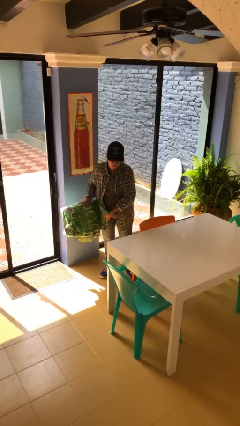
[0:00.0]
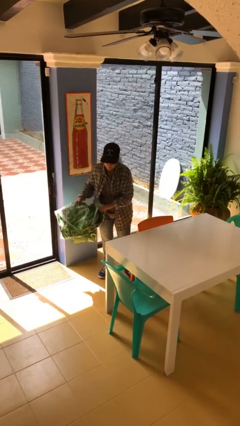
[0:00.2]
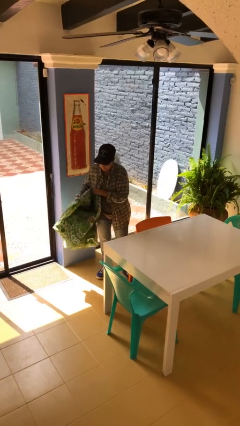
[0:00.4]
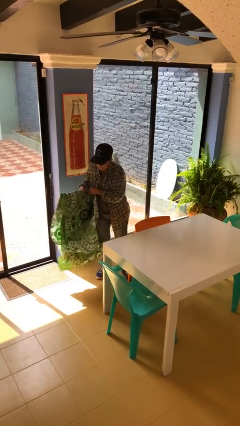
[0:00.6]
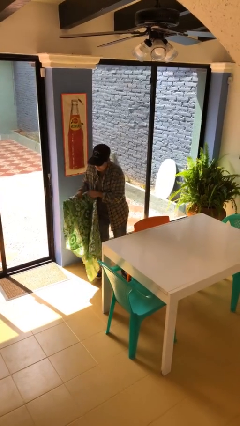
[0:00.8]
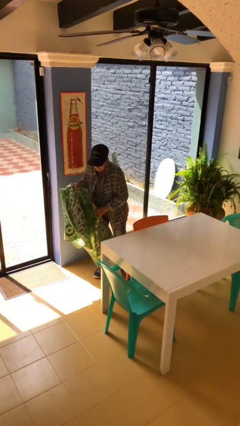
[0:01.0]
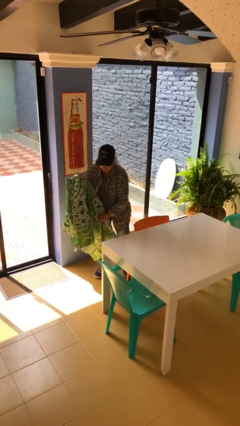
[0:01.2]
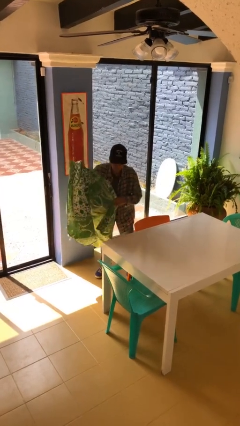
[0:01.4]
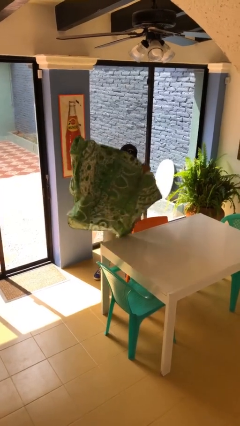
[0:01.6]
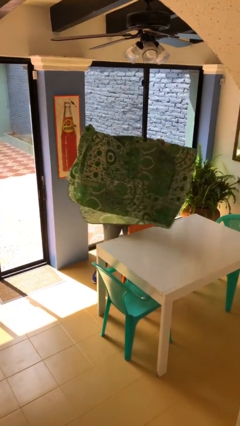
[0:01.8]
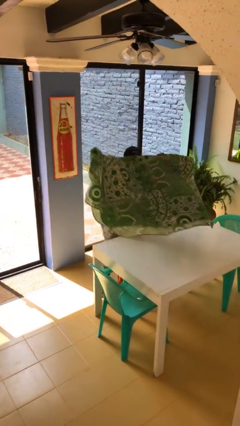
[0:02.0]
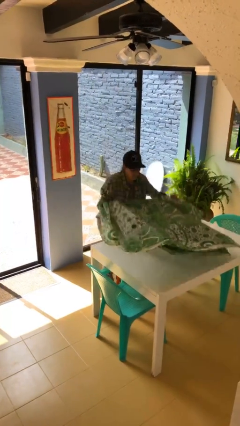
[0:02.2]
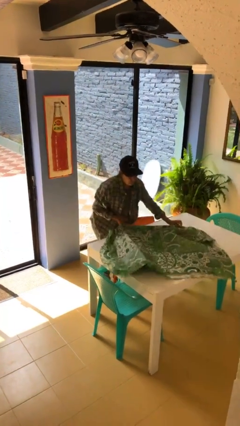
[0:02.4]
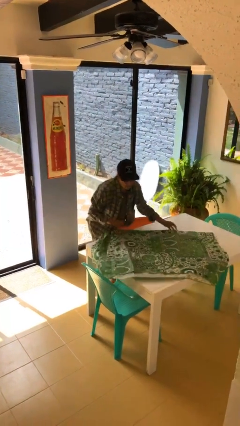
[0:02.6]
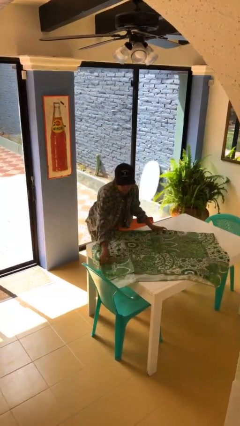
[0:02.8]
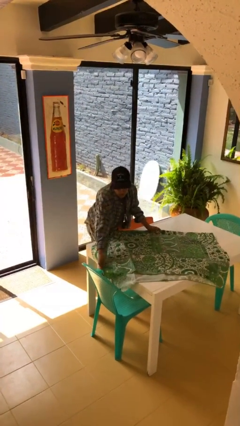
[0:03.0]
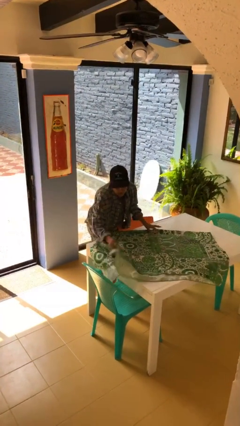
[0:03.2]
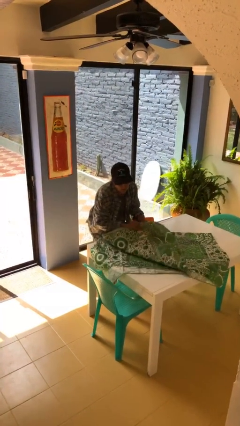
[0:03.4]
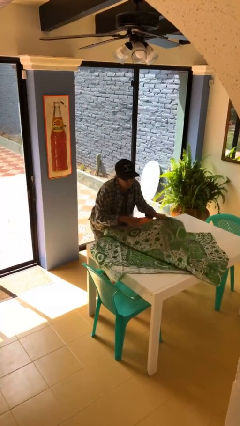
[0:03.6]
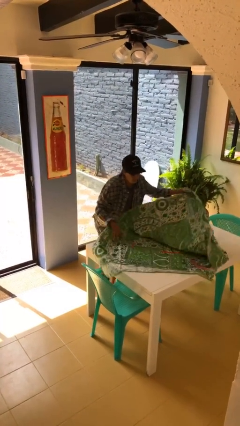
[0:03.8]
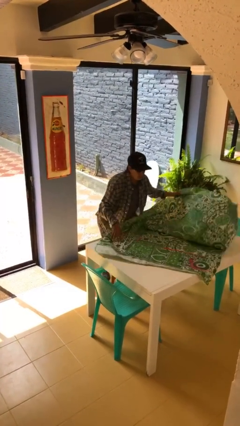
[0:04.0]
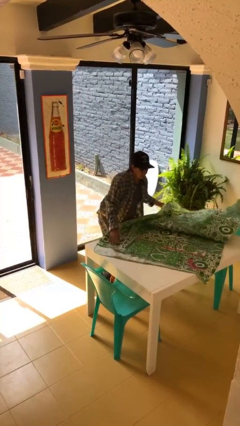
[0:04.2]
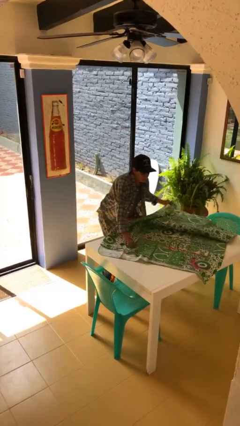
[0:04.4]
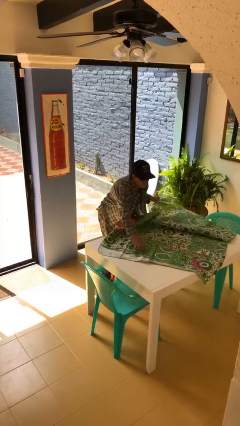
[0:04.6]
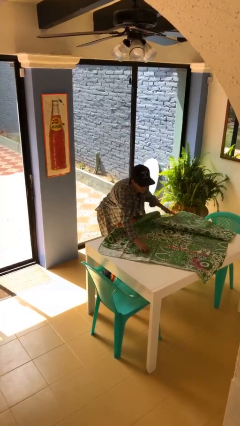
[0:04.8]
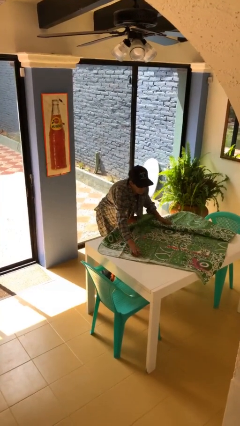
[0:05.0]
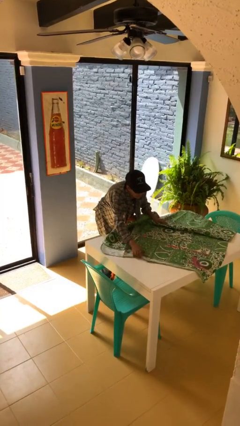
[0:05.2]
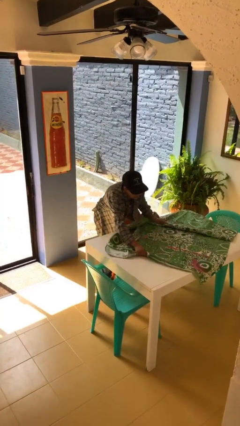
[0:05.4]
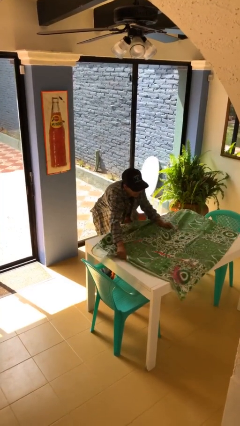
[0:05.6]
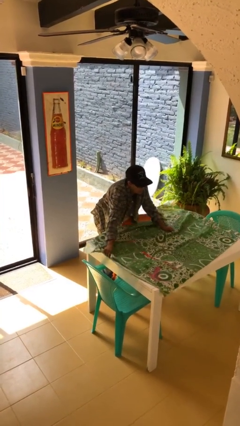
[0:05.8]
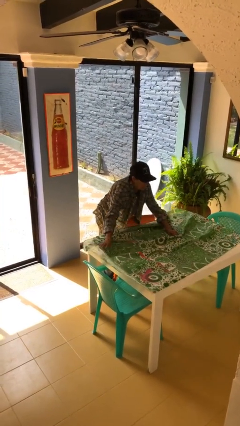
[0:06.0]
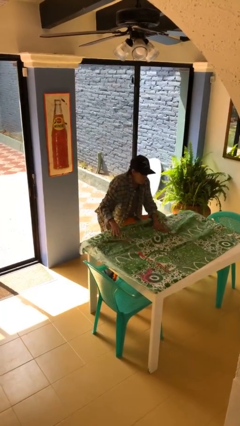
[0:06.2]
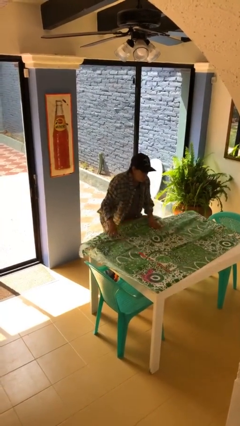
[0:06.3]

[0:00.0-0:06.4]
person spreads tablecloth

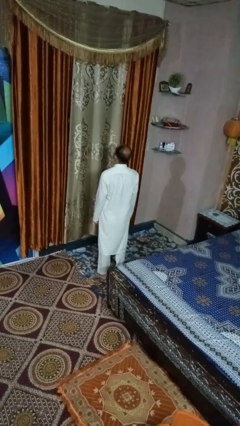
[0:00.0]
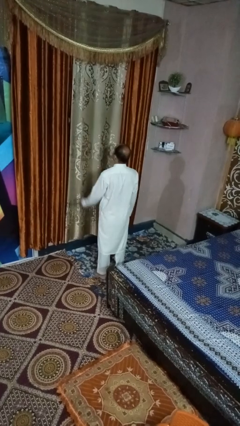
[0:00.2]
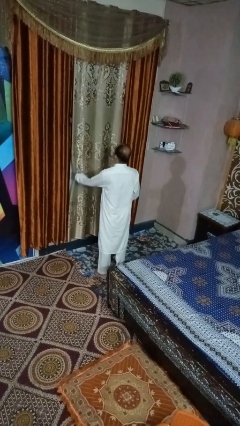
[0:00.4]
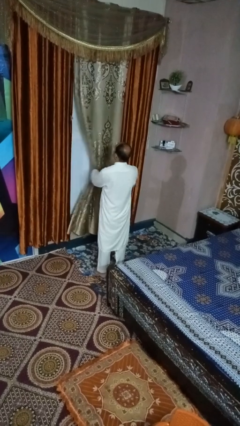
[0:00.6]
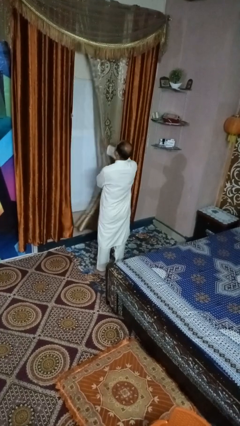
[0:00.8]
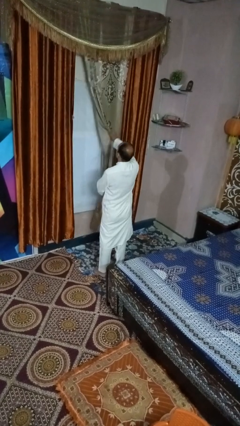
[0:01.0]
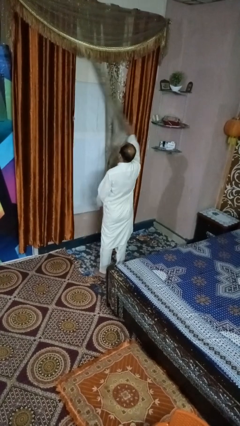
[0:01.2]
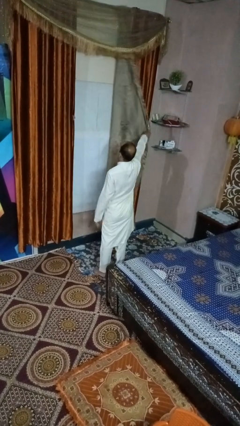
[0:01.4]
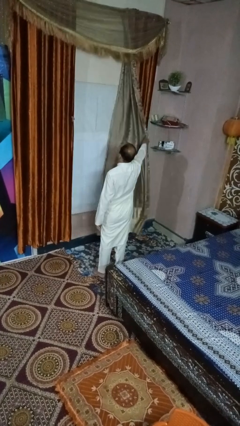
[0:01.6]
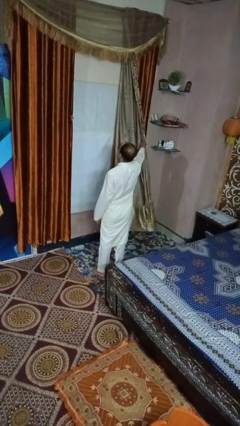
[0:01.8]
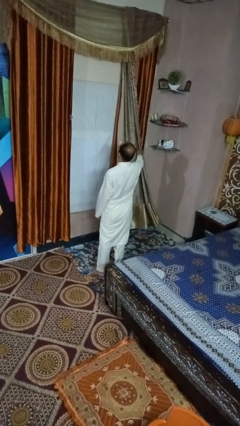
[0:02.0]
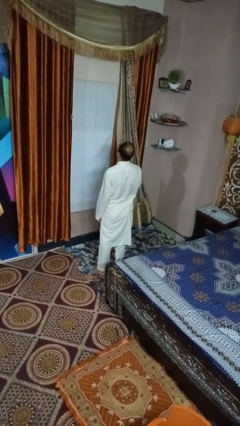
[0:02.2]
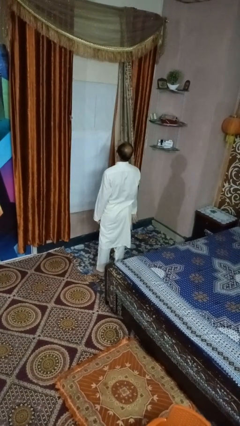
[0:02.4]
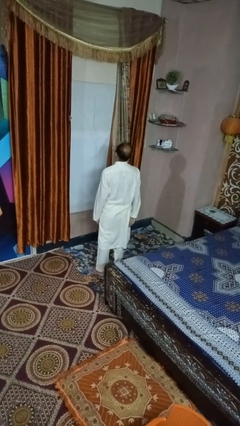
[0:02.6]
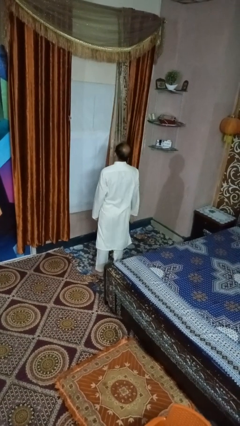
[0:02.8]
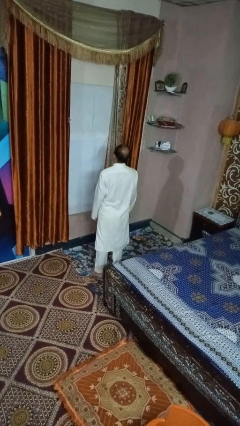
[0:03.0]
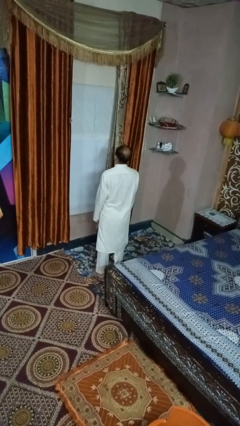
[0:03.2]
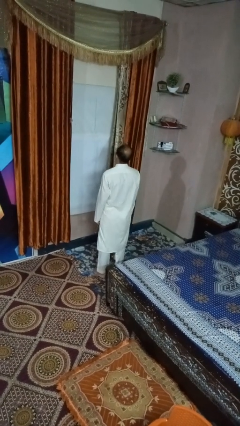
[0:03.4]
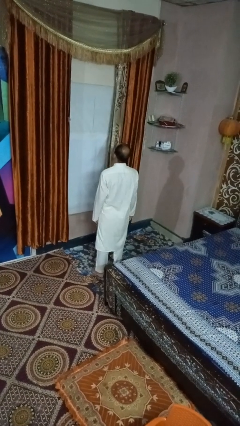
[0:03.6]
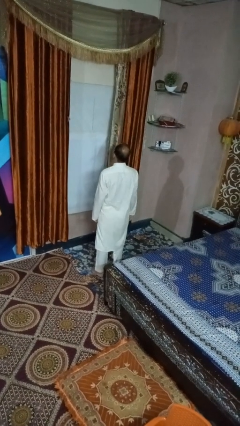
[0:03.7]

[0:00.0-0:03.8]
person opens curtains

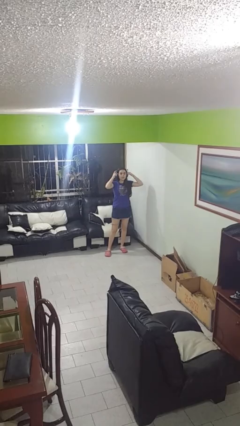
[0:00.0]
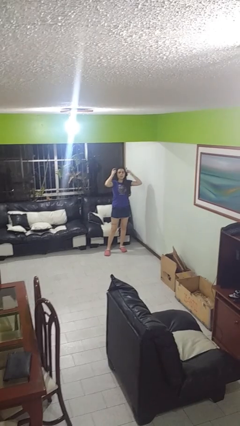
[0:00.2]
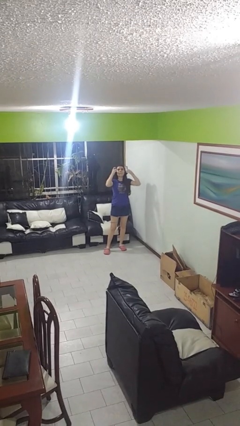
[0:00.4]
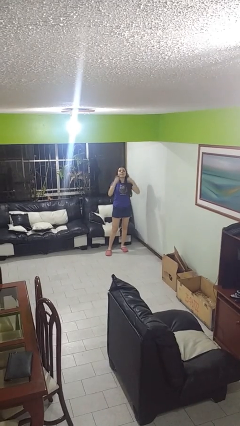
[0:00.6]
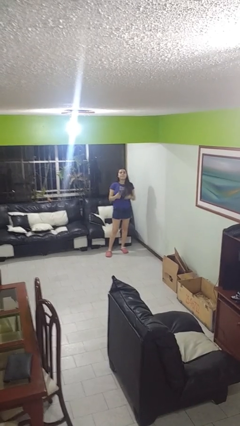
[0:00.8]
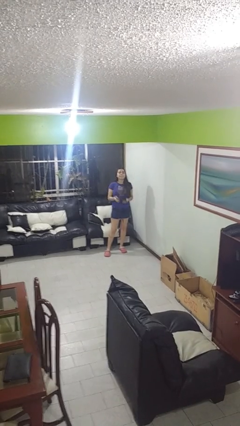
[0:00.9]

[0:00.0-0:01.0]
person takes off headphones

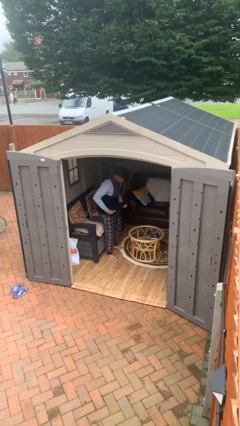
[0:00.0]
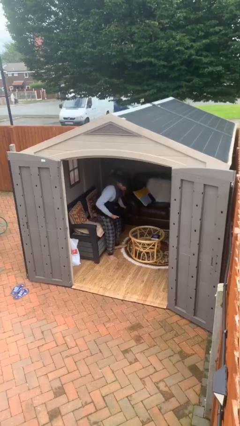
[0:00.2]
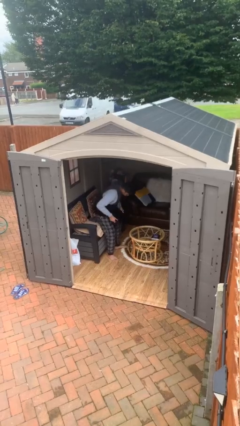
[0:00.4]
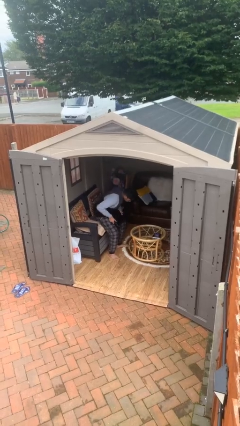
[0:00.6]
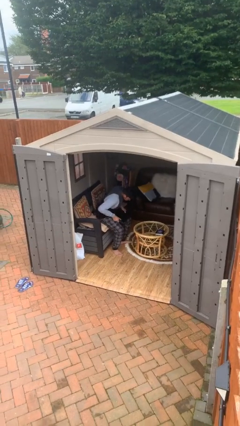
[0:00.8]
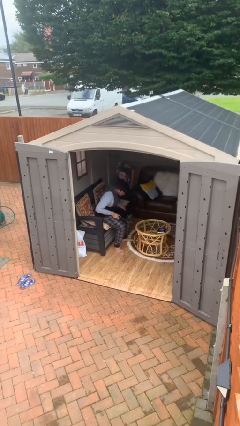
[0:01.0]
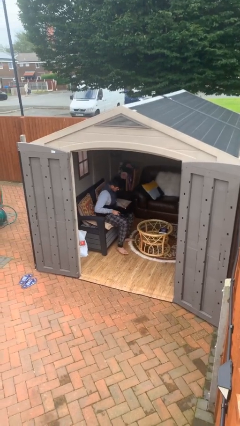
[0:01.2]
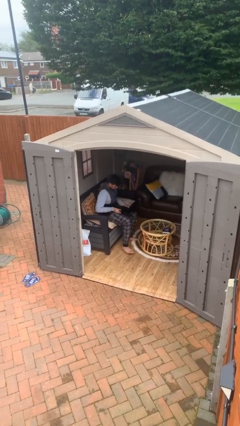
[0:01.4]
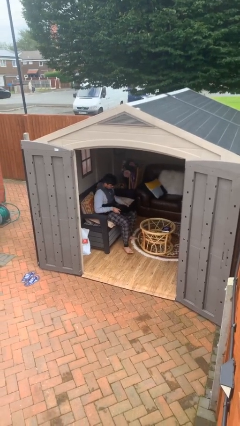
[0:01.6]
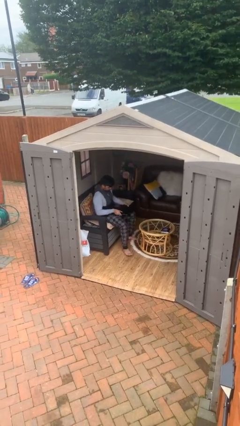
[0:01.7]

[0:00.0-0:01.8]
person sits down

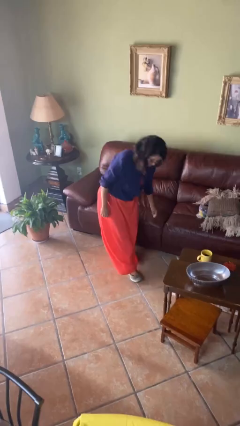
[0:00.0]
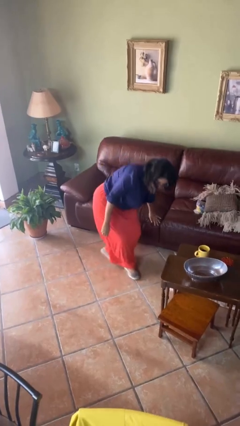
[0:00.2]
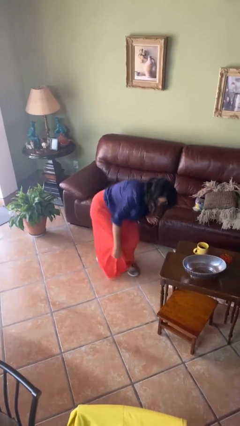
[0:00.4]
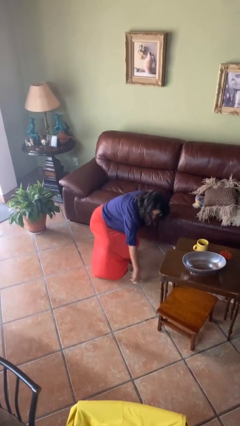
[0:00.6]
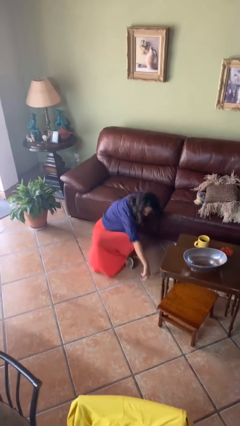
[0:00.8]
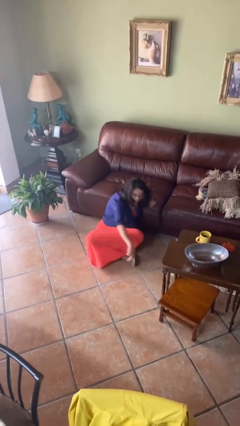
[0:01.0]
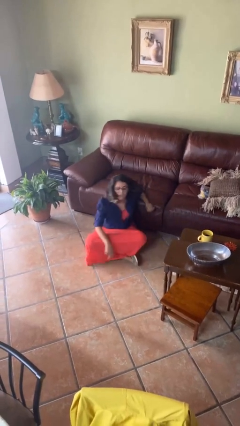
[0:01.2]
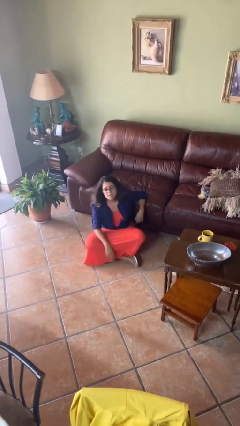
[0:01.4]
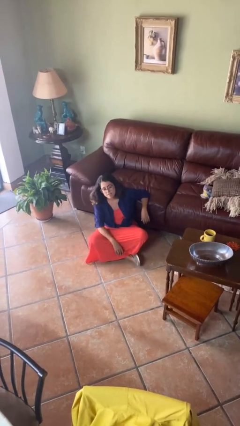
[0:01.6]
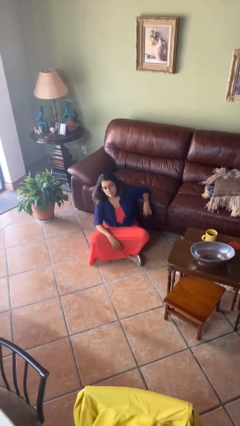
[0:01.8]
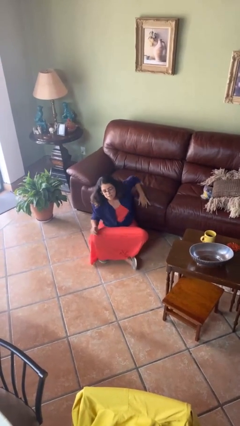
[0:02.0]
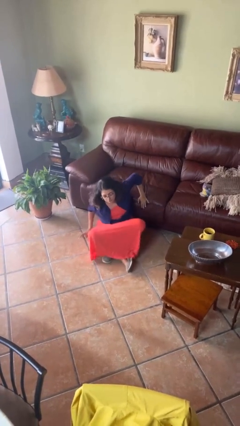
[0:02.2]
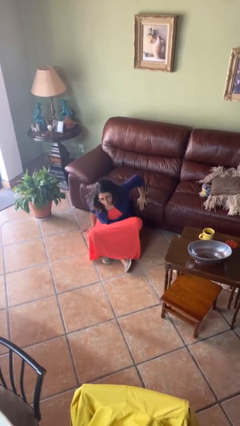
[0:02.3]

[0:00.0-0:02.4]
person sits crisscross

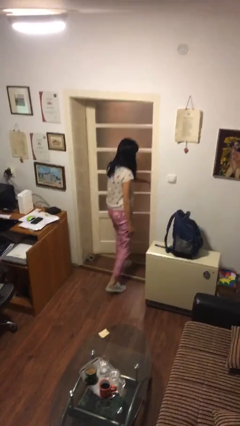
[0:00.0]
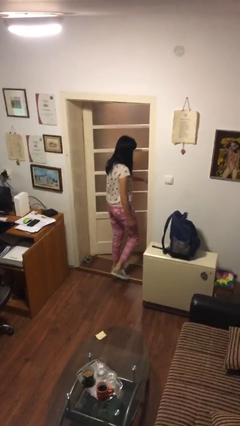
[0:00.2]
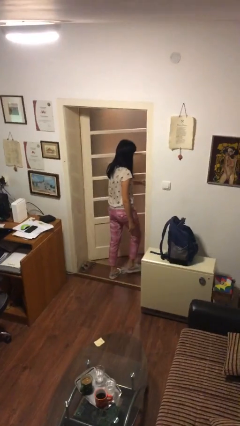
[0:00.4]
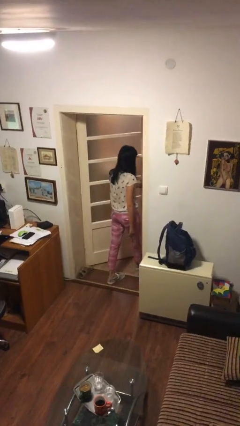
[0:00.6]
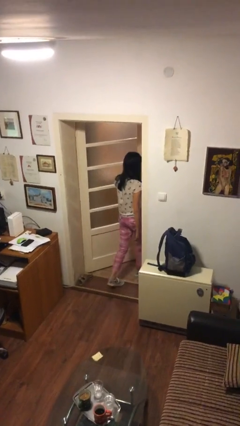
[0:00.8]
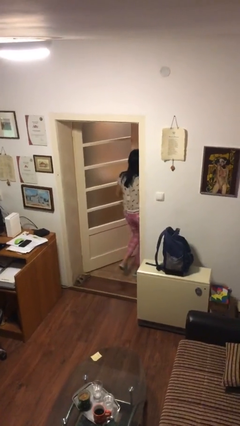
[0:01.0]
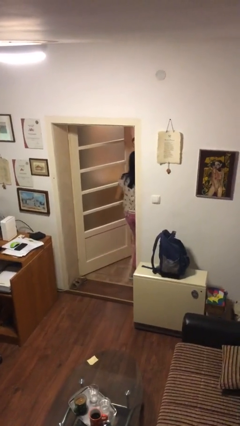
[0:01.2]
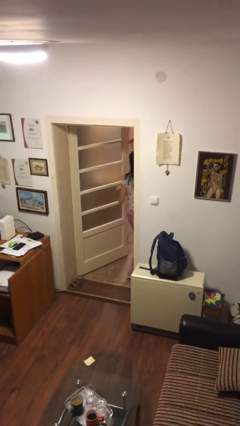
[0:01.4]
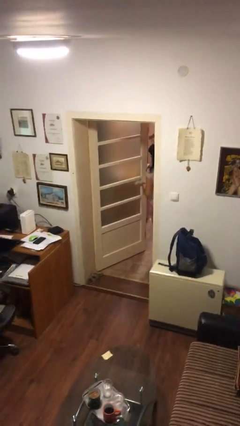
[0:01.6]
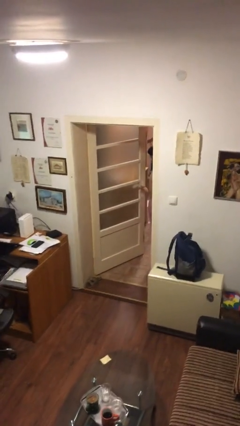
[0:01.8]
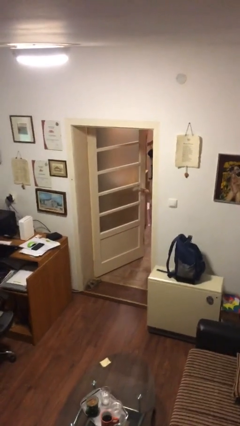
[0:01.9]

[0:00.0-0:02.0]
person exits scene through structure

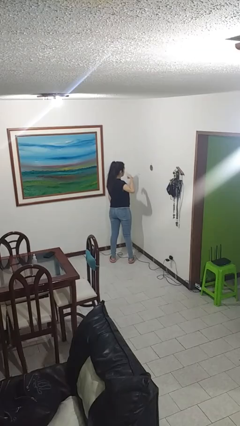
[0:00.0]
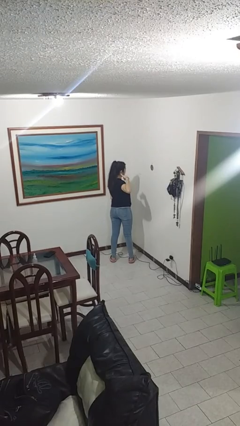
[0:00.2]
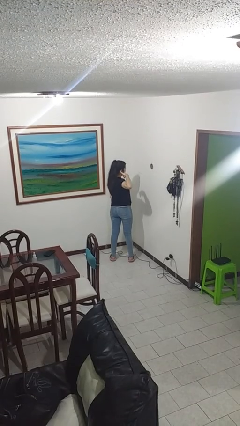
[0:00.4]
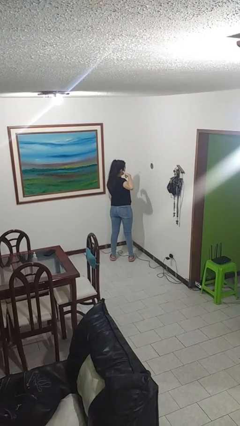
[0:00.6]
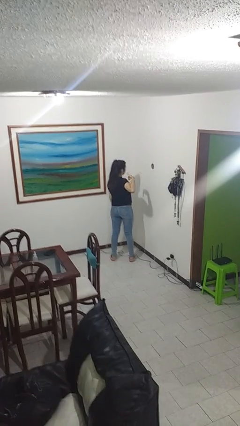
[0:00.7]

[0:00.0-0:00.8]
person gestures call me
